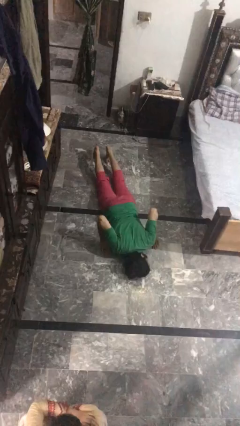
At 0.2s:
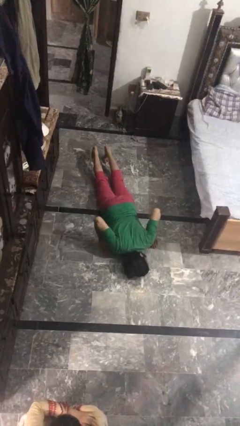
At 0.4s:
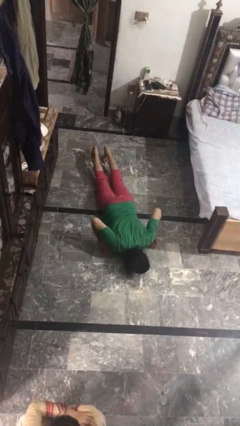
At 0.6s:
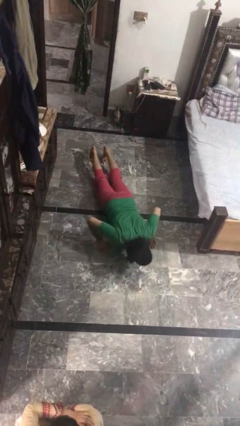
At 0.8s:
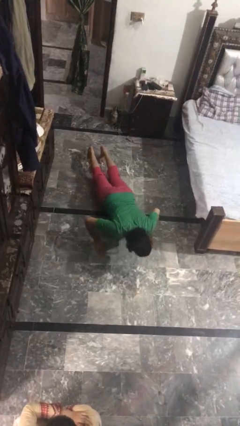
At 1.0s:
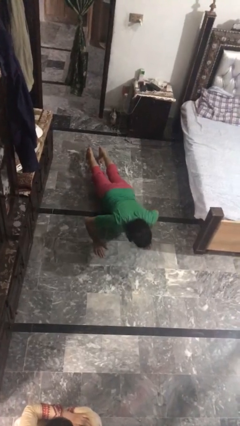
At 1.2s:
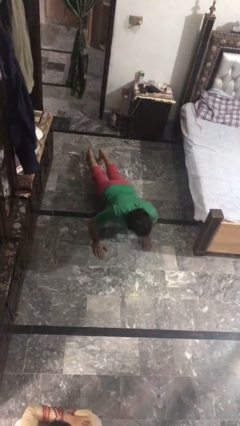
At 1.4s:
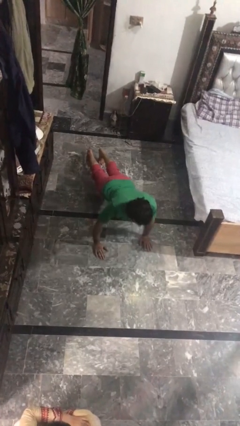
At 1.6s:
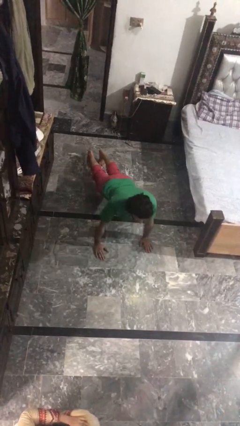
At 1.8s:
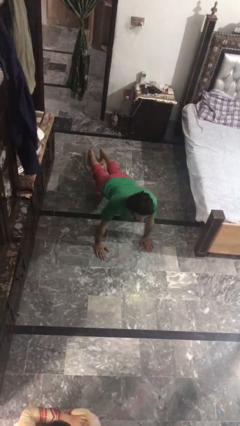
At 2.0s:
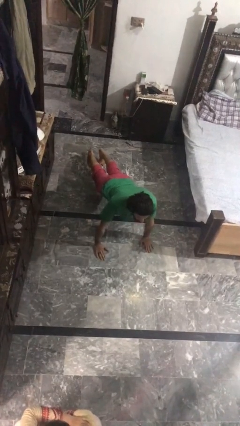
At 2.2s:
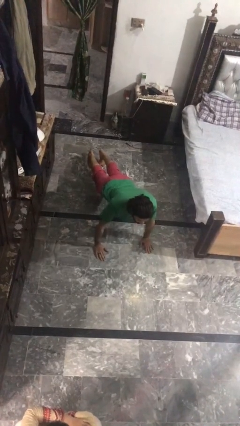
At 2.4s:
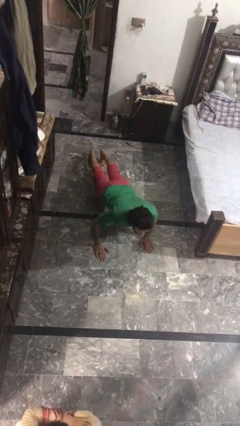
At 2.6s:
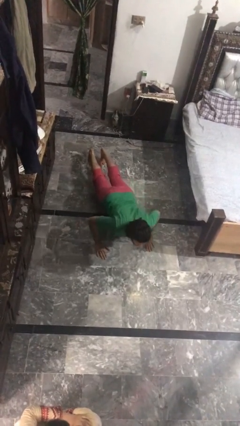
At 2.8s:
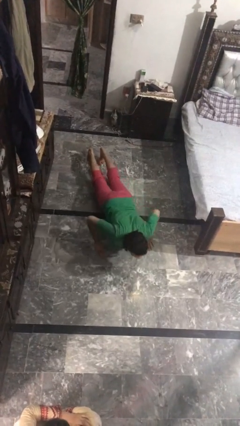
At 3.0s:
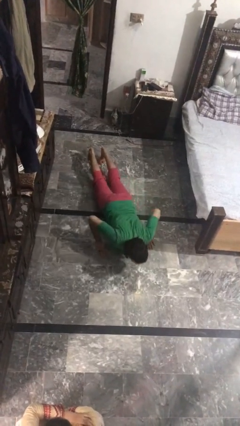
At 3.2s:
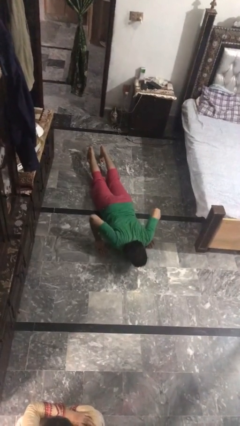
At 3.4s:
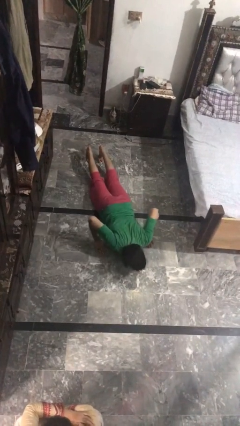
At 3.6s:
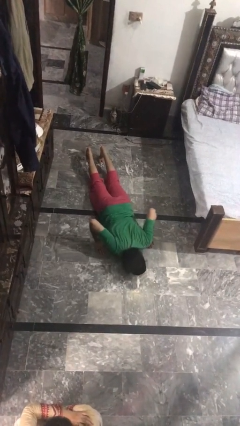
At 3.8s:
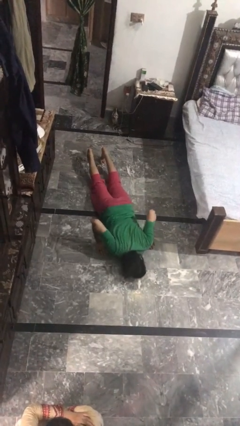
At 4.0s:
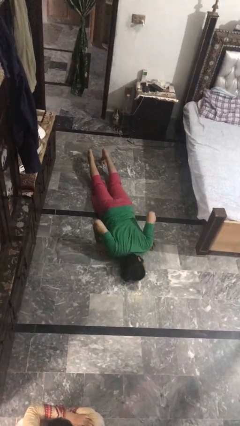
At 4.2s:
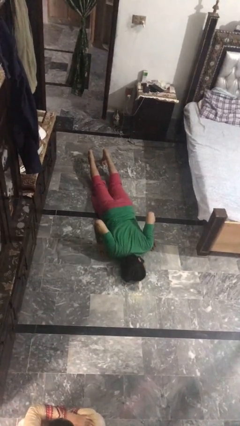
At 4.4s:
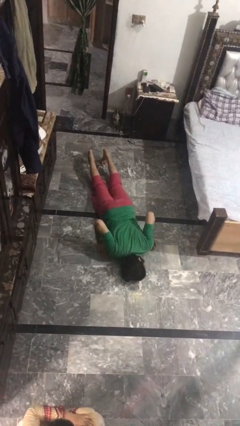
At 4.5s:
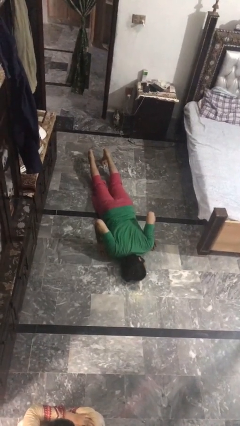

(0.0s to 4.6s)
person exercises with pushup

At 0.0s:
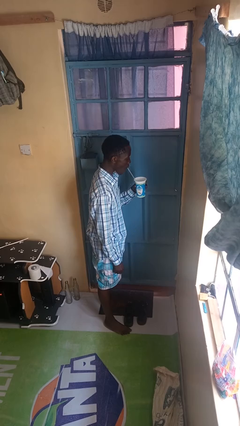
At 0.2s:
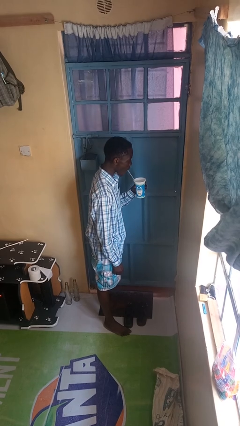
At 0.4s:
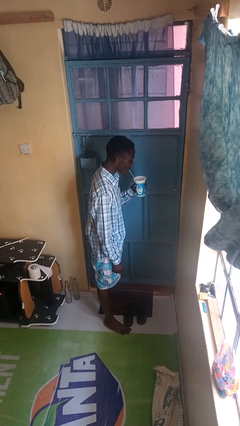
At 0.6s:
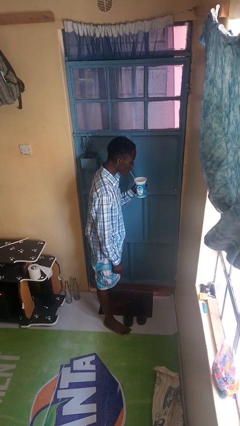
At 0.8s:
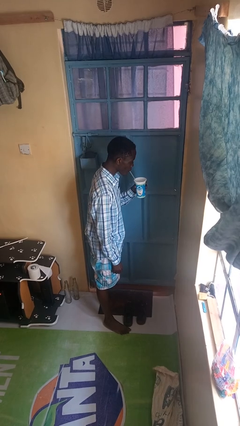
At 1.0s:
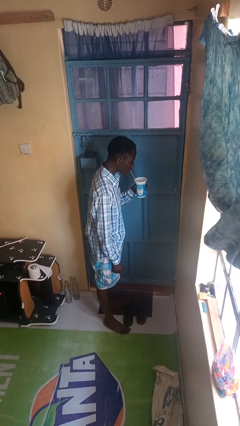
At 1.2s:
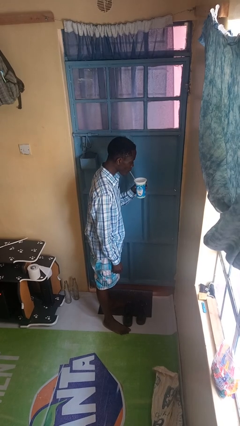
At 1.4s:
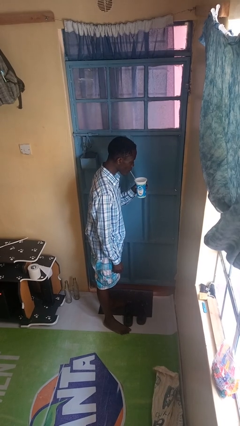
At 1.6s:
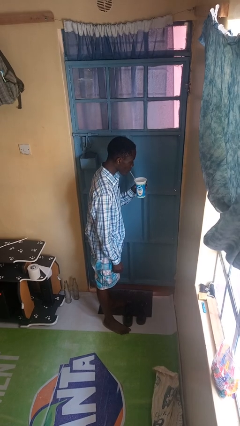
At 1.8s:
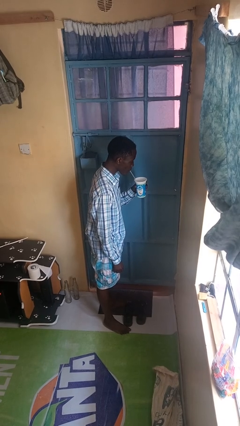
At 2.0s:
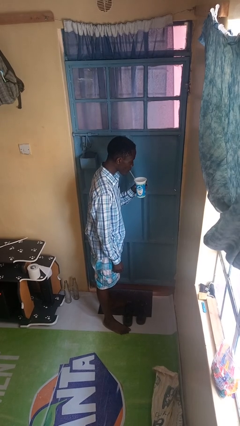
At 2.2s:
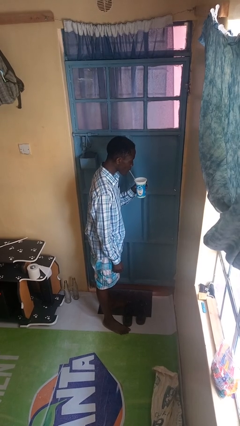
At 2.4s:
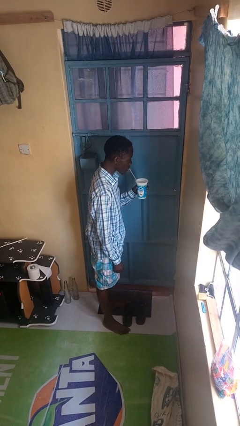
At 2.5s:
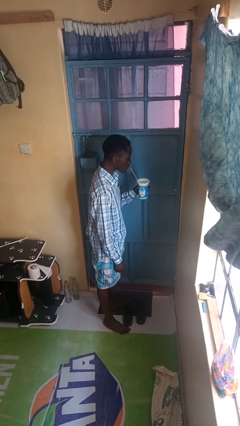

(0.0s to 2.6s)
person drinks from straw

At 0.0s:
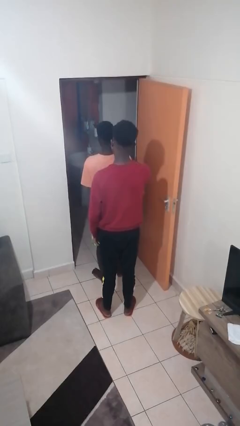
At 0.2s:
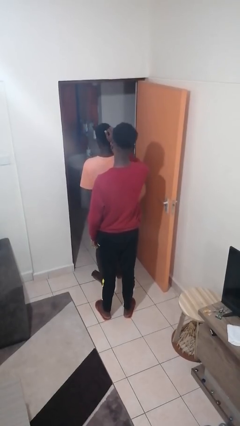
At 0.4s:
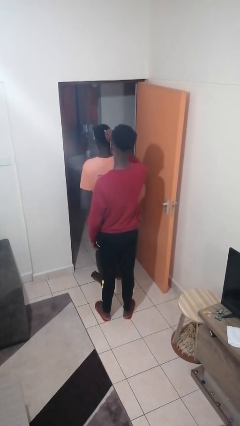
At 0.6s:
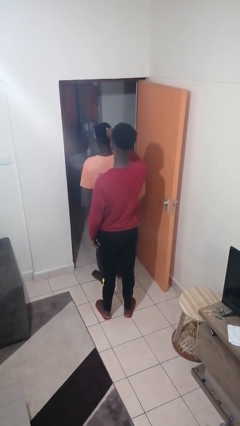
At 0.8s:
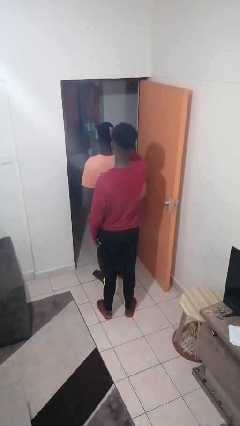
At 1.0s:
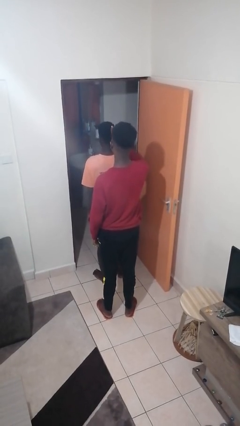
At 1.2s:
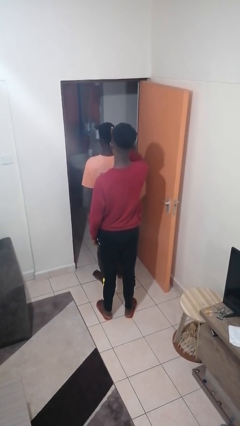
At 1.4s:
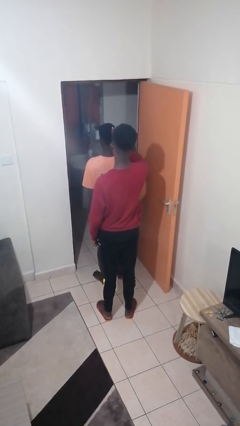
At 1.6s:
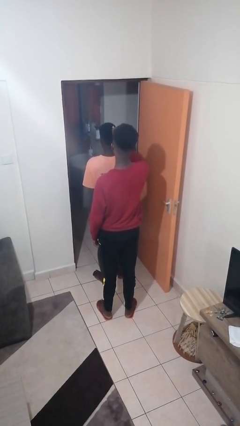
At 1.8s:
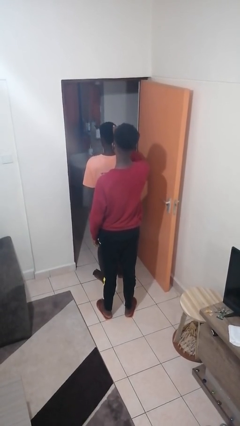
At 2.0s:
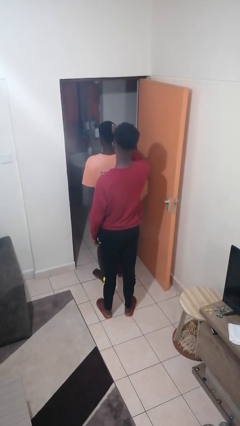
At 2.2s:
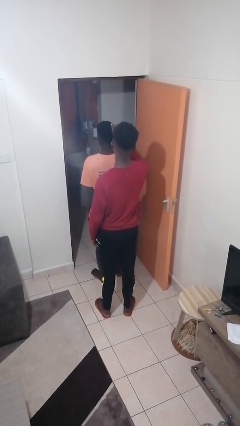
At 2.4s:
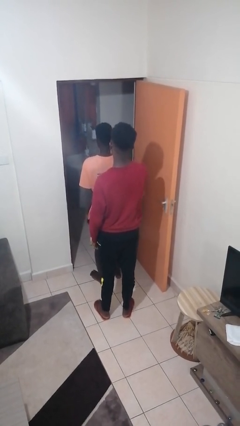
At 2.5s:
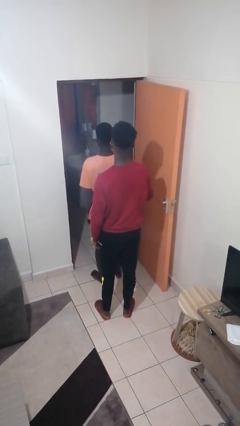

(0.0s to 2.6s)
person grabs person by hair

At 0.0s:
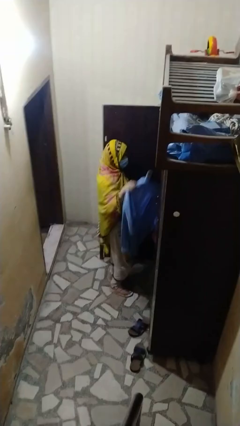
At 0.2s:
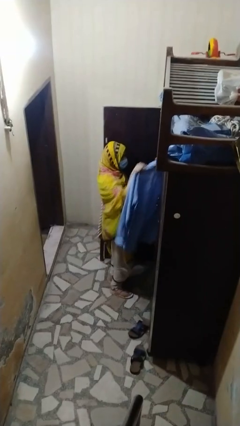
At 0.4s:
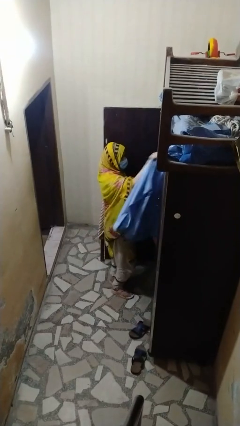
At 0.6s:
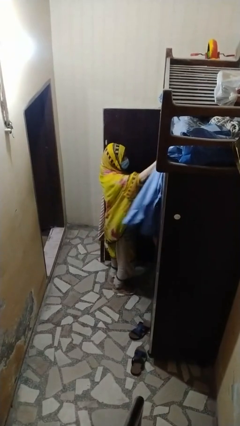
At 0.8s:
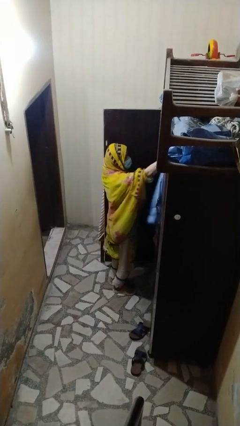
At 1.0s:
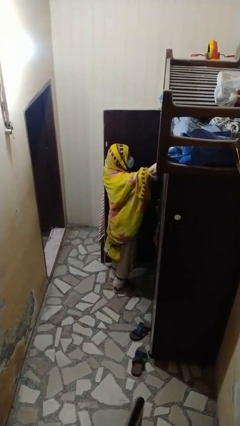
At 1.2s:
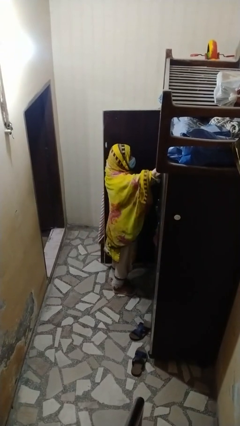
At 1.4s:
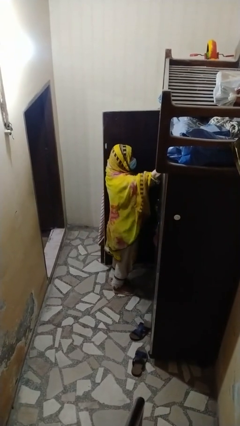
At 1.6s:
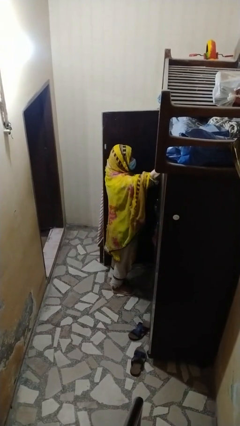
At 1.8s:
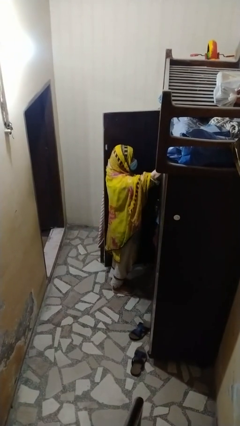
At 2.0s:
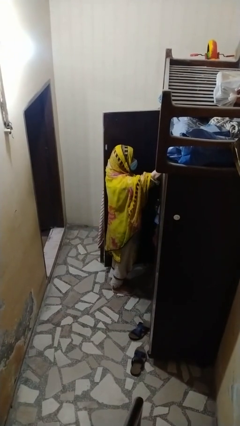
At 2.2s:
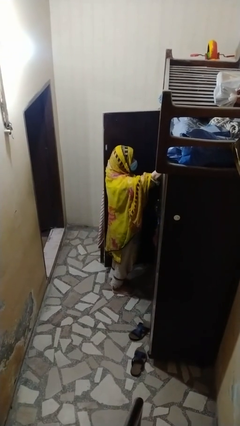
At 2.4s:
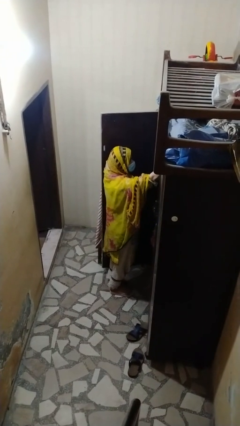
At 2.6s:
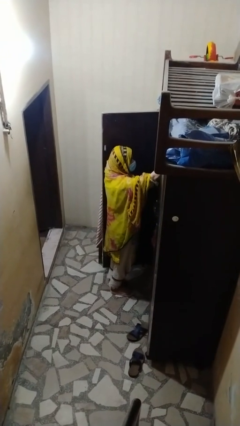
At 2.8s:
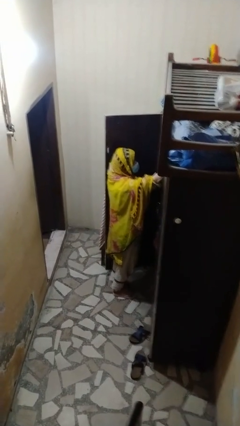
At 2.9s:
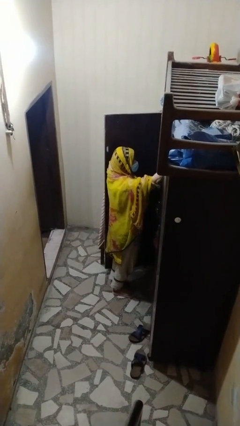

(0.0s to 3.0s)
person puts clothes into closet

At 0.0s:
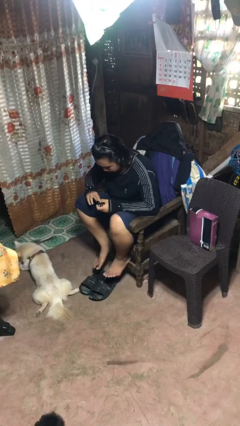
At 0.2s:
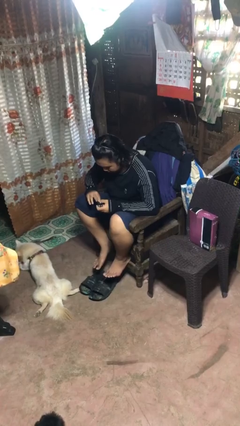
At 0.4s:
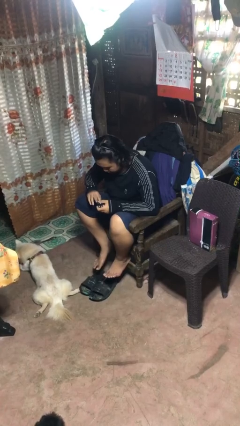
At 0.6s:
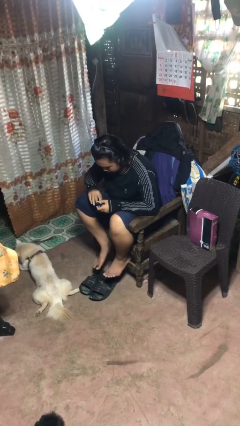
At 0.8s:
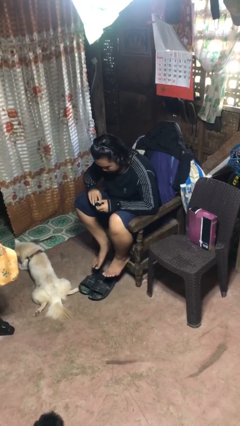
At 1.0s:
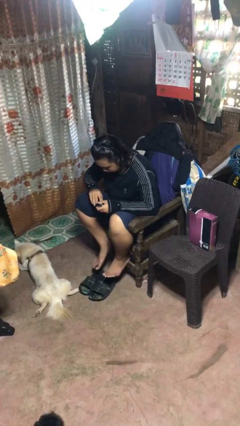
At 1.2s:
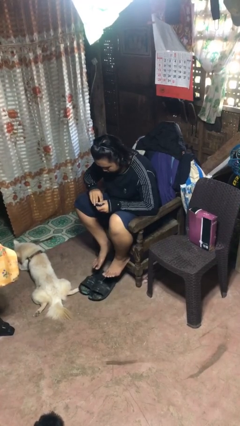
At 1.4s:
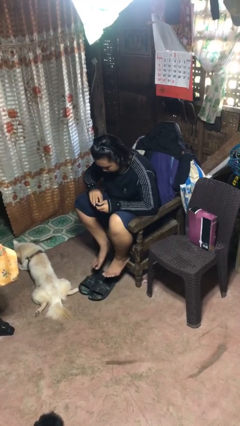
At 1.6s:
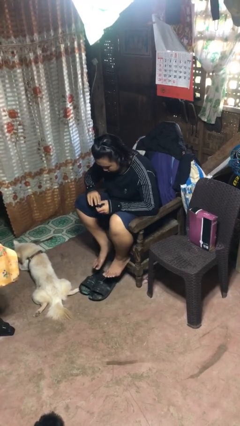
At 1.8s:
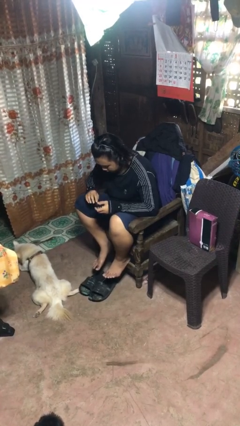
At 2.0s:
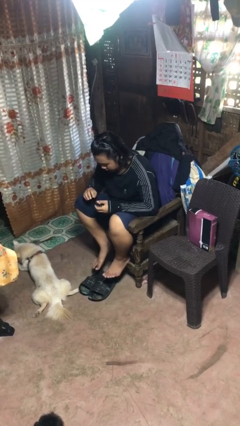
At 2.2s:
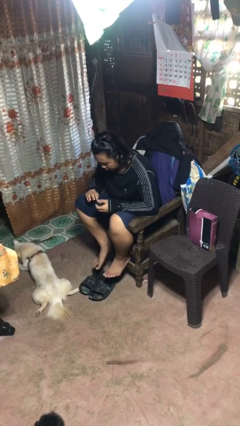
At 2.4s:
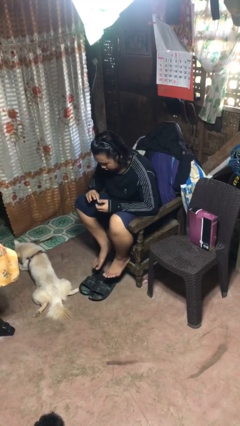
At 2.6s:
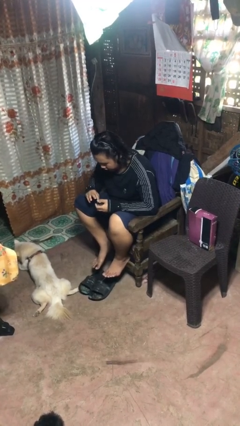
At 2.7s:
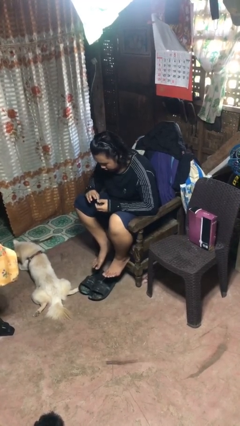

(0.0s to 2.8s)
person clips fingernails

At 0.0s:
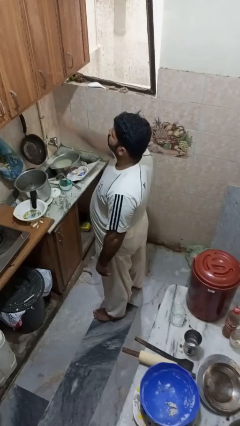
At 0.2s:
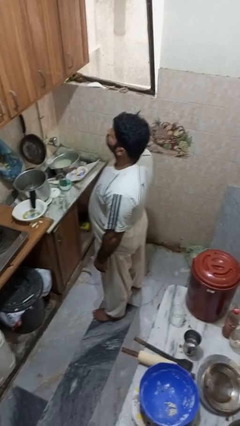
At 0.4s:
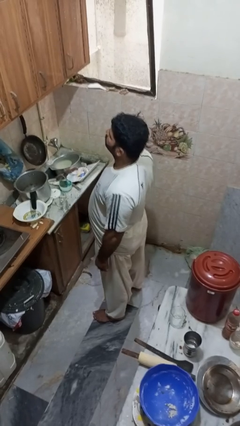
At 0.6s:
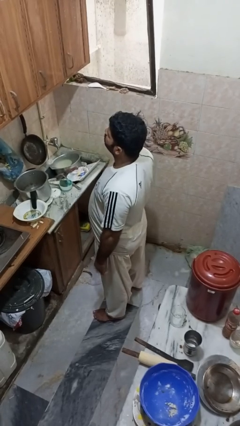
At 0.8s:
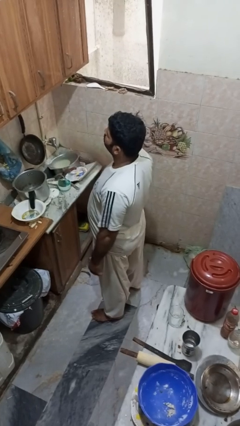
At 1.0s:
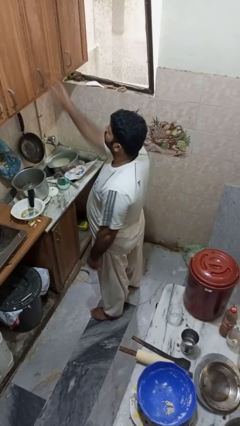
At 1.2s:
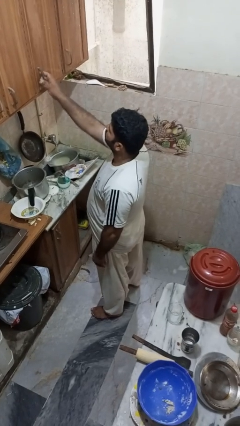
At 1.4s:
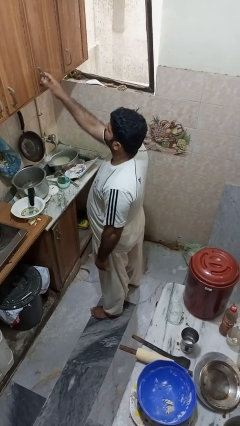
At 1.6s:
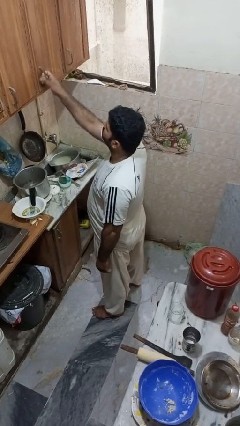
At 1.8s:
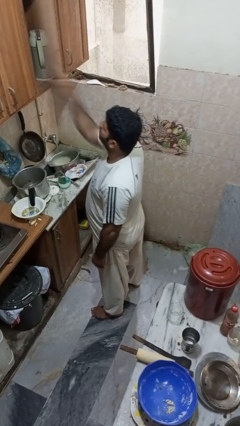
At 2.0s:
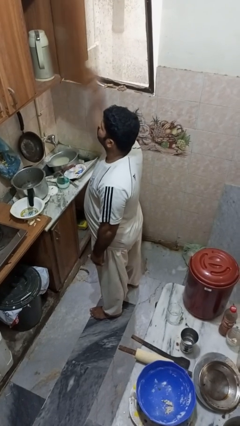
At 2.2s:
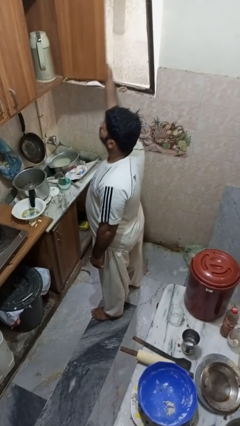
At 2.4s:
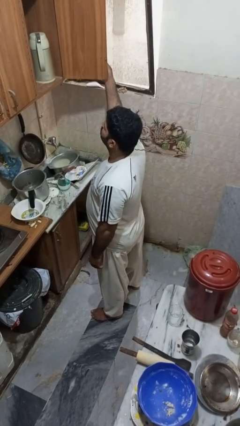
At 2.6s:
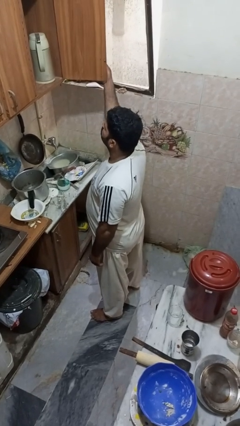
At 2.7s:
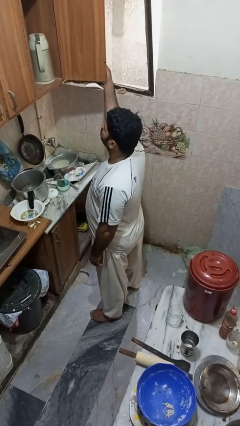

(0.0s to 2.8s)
person opens cabinet
